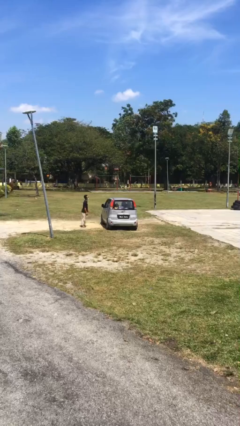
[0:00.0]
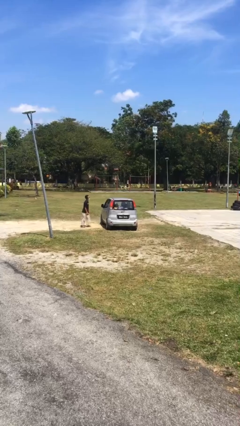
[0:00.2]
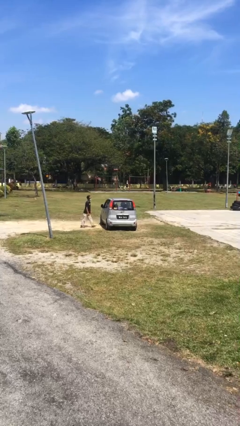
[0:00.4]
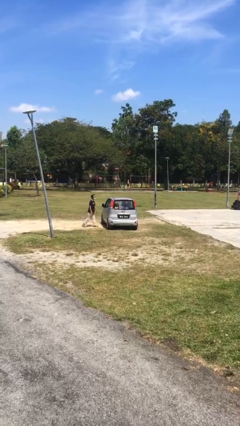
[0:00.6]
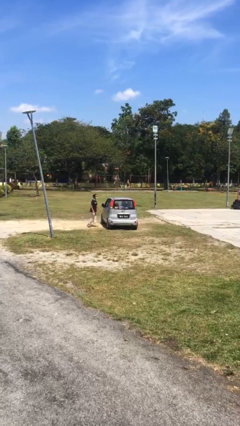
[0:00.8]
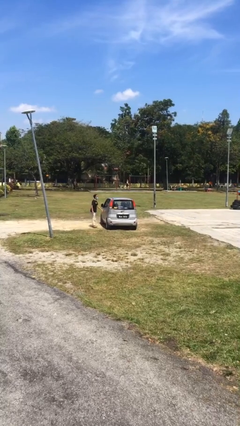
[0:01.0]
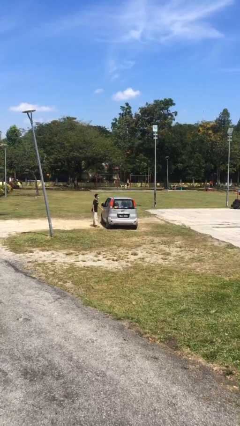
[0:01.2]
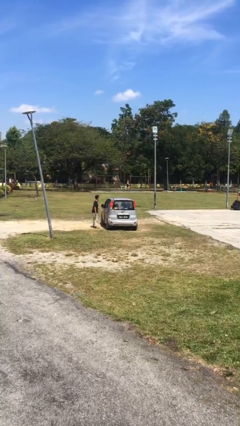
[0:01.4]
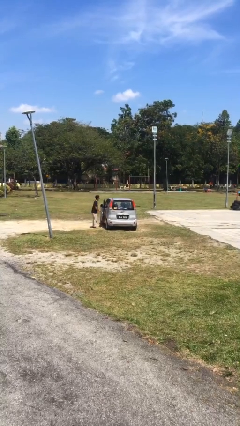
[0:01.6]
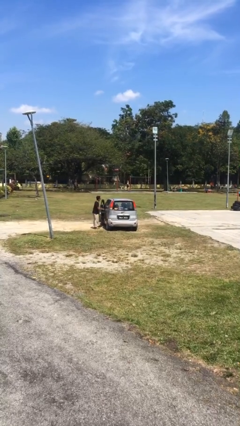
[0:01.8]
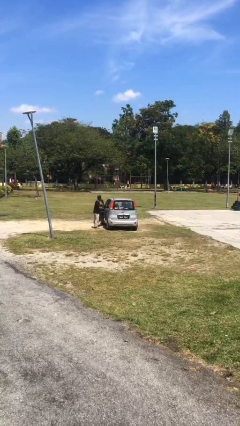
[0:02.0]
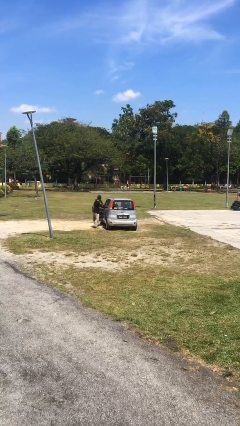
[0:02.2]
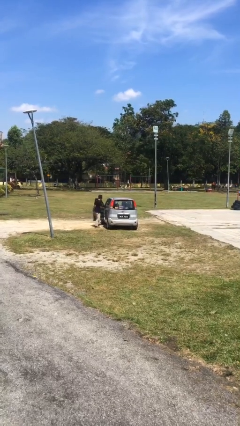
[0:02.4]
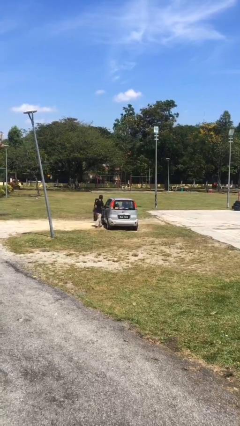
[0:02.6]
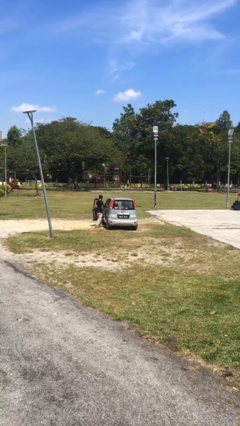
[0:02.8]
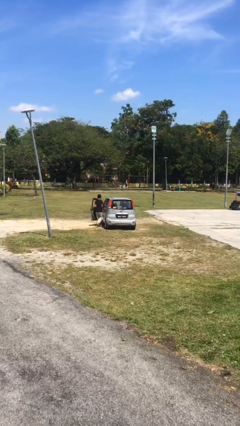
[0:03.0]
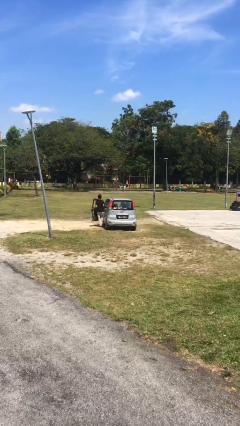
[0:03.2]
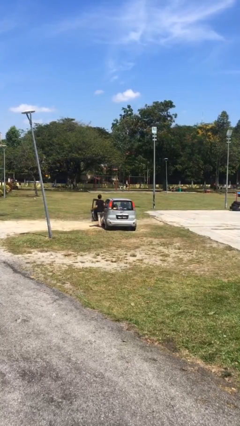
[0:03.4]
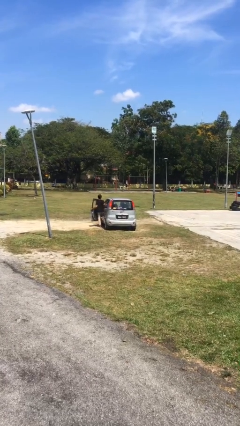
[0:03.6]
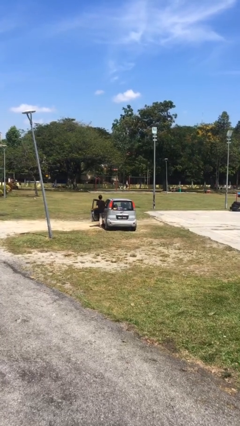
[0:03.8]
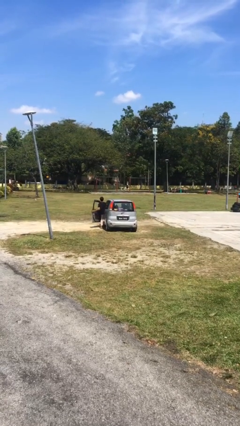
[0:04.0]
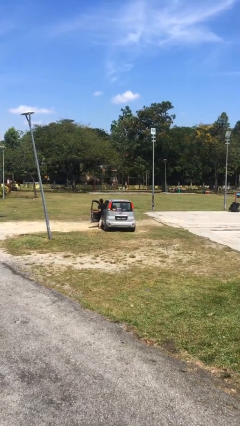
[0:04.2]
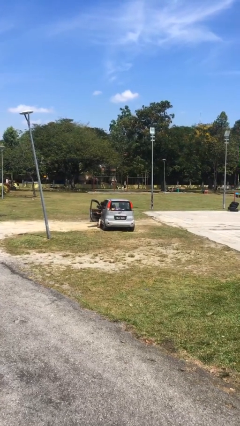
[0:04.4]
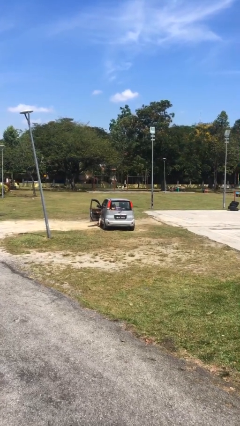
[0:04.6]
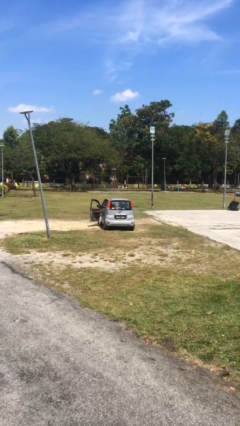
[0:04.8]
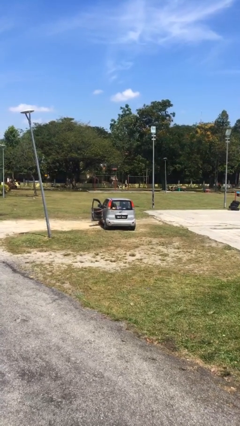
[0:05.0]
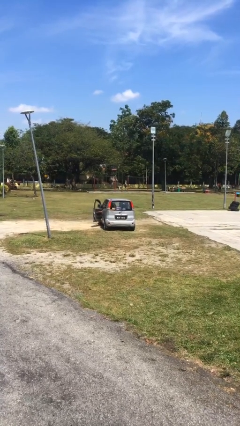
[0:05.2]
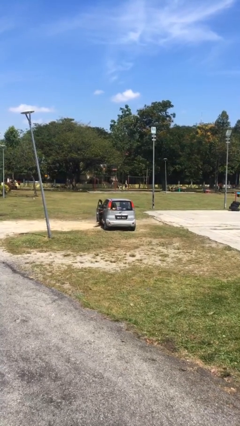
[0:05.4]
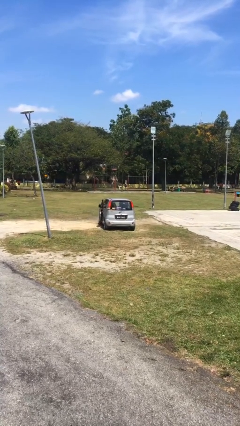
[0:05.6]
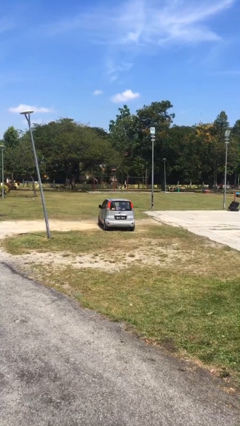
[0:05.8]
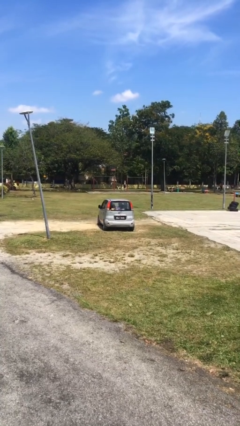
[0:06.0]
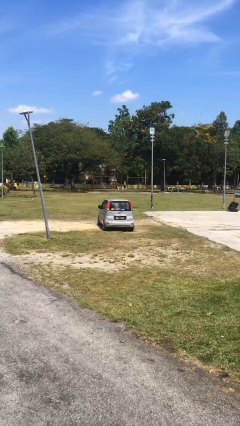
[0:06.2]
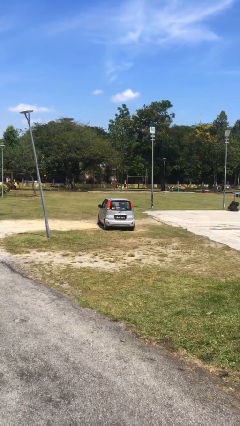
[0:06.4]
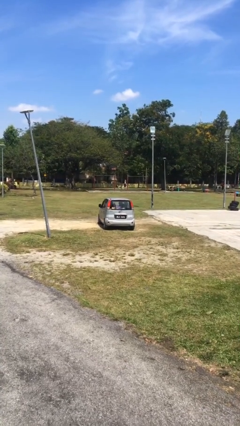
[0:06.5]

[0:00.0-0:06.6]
car picks up person

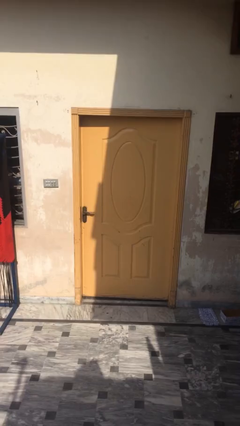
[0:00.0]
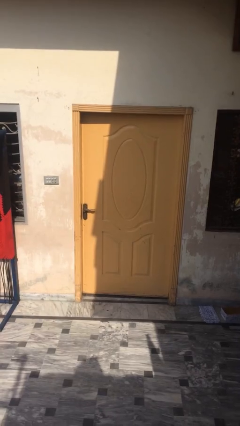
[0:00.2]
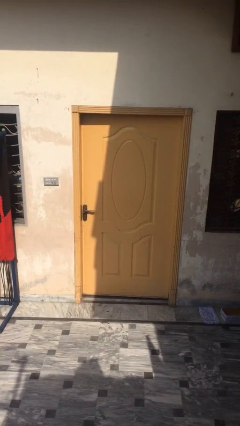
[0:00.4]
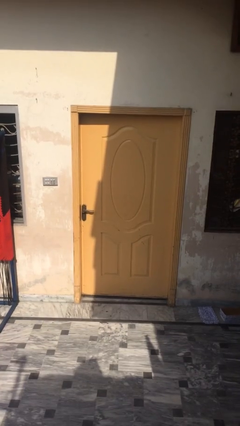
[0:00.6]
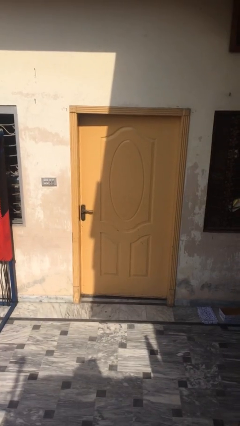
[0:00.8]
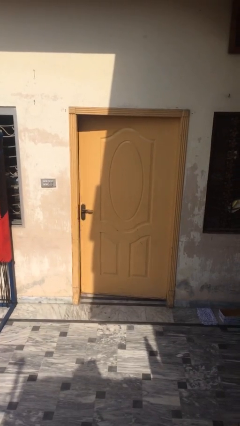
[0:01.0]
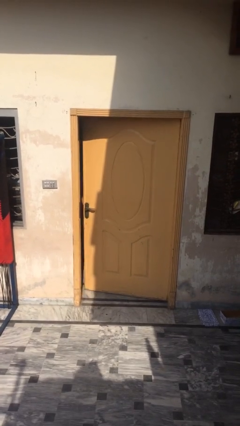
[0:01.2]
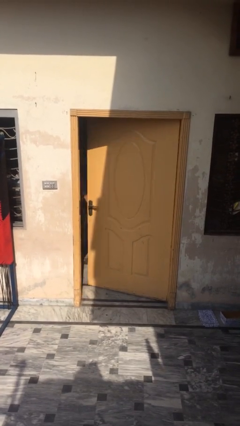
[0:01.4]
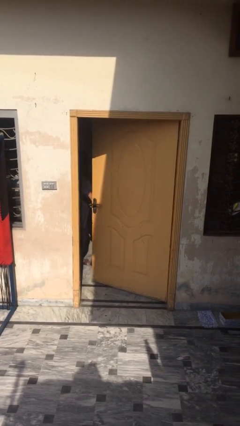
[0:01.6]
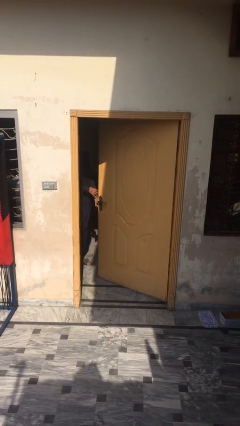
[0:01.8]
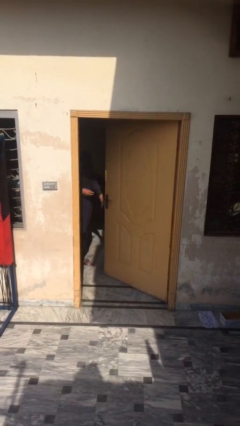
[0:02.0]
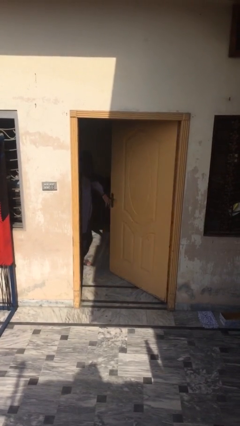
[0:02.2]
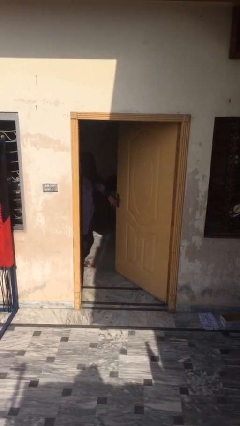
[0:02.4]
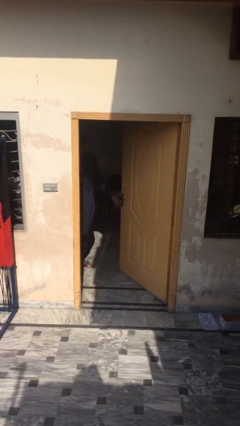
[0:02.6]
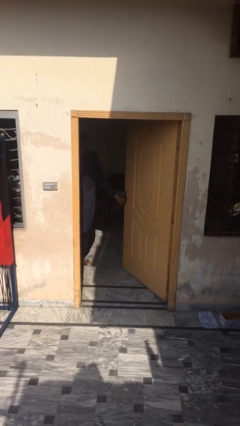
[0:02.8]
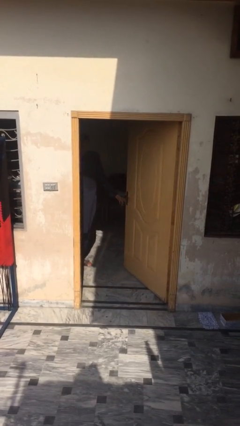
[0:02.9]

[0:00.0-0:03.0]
person opens facility door

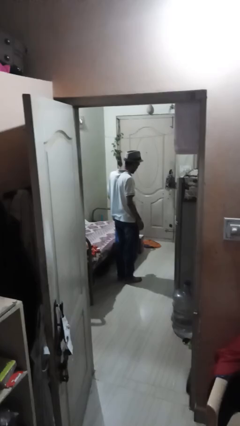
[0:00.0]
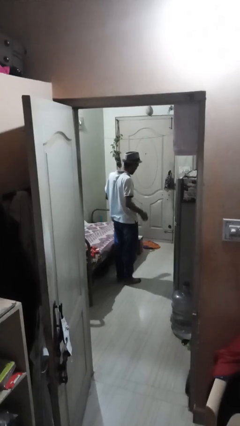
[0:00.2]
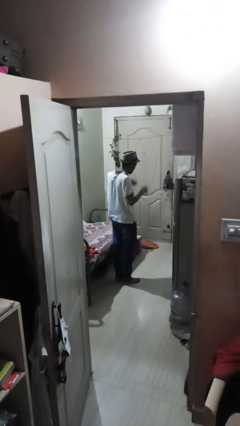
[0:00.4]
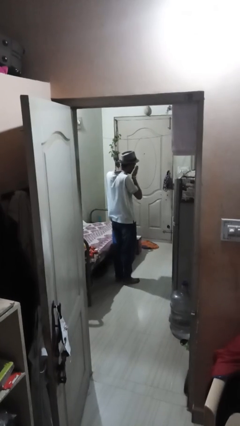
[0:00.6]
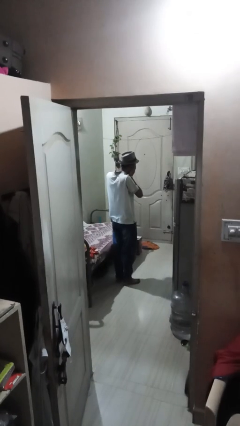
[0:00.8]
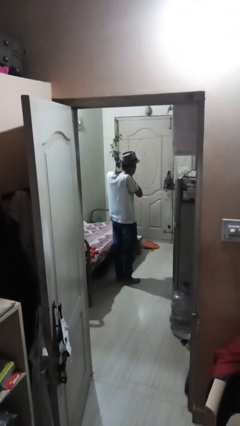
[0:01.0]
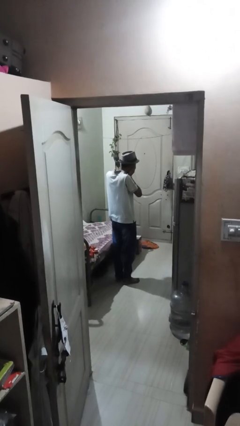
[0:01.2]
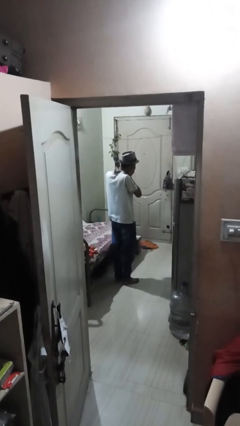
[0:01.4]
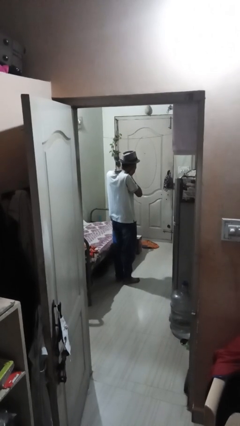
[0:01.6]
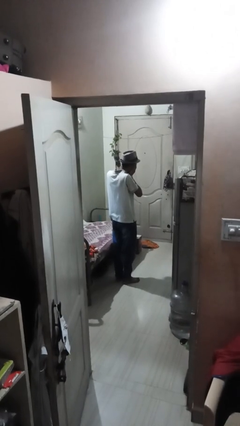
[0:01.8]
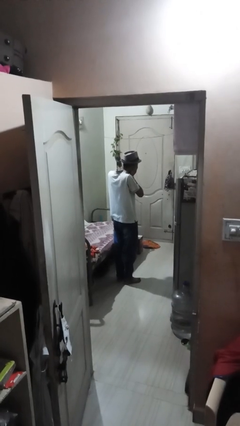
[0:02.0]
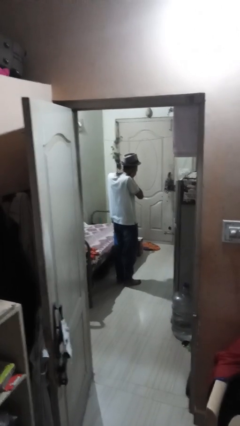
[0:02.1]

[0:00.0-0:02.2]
person covers face with hands

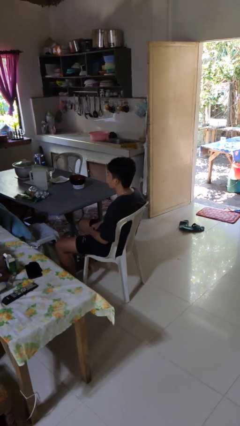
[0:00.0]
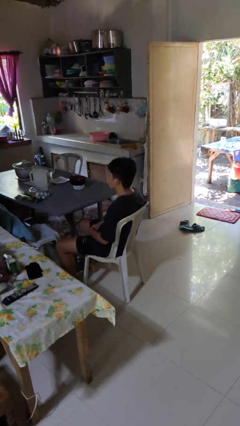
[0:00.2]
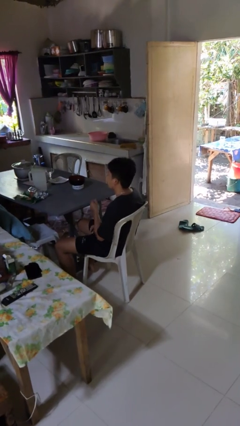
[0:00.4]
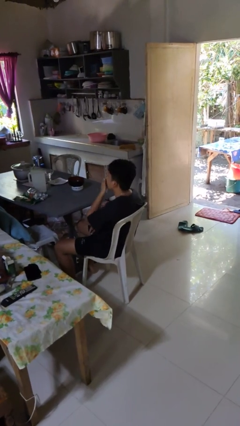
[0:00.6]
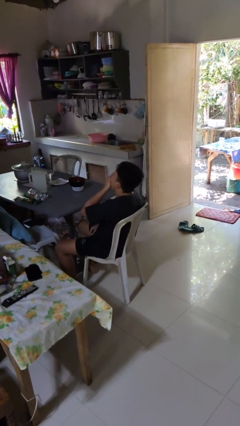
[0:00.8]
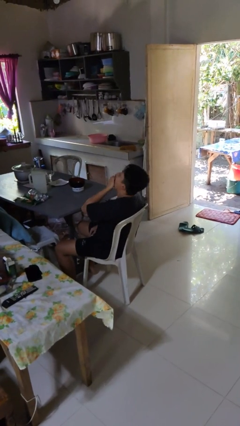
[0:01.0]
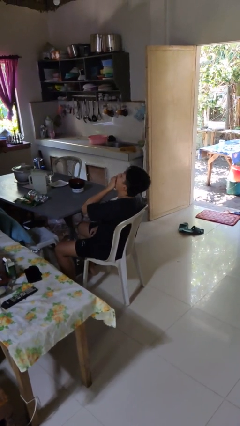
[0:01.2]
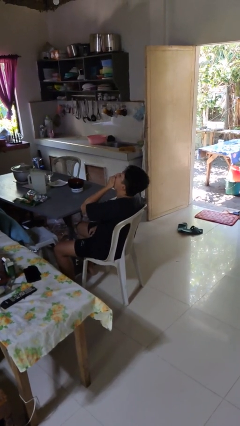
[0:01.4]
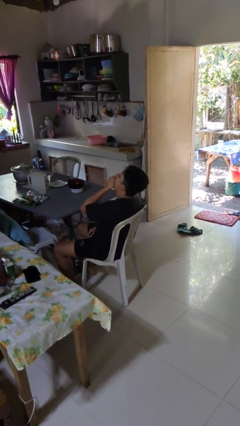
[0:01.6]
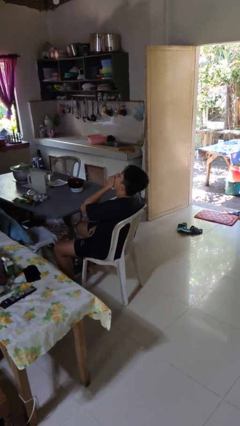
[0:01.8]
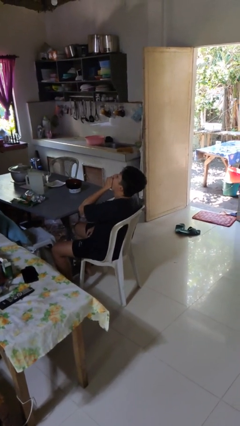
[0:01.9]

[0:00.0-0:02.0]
person yawns

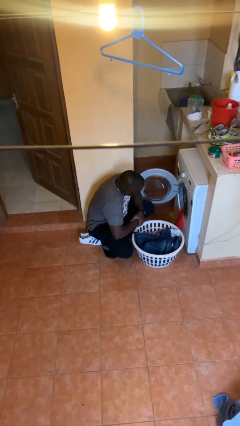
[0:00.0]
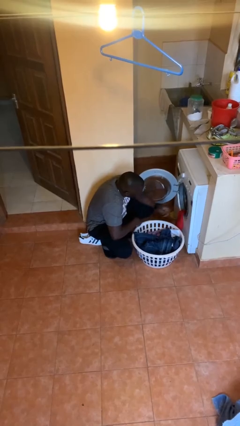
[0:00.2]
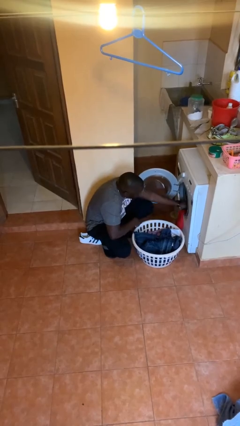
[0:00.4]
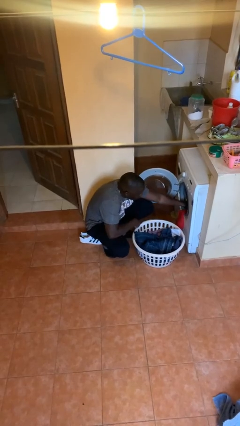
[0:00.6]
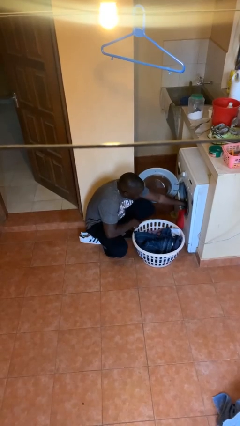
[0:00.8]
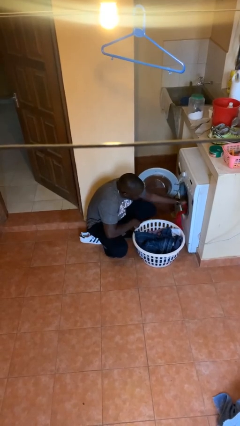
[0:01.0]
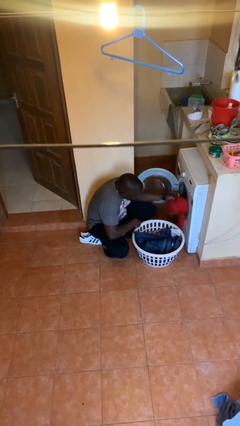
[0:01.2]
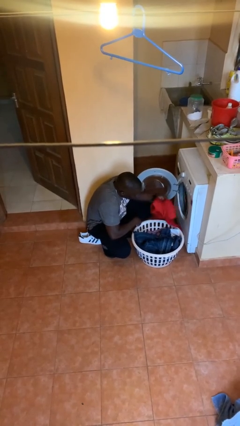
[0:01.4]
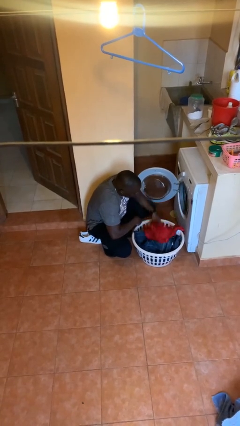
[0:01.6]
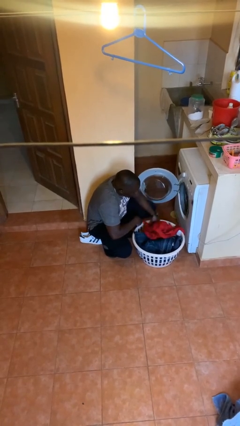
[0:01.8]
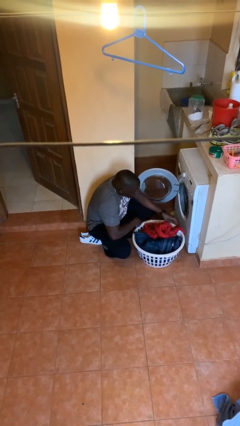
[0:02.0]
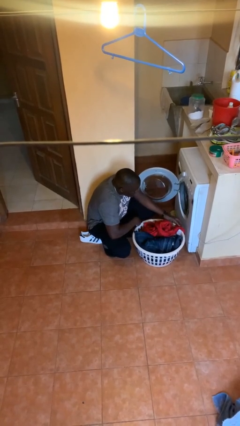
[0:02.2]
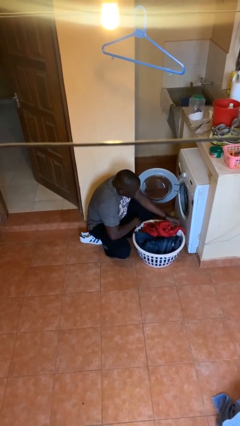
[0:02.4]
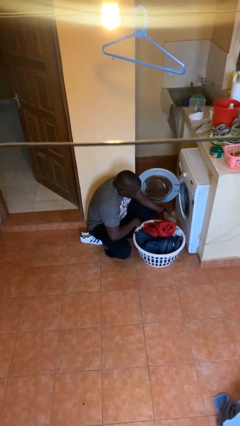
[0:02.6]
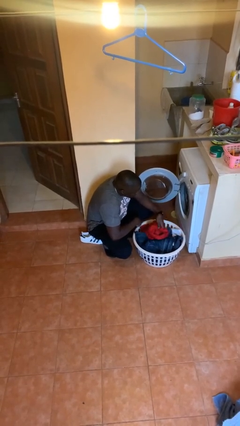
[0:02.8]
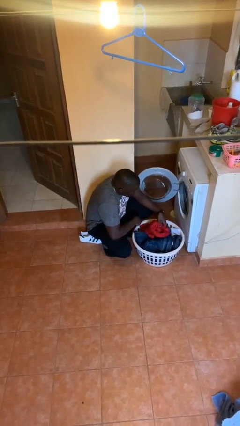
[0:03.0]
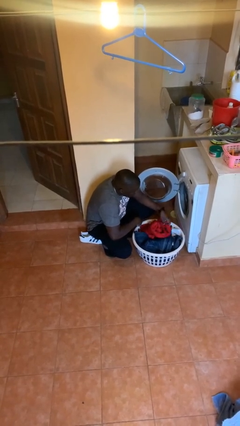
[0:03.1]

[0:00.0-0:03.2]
person unloads dryer

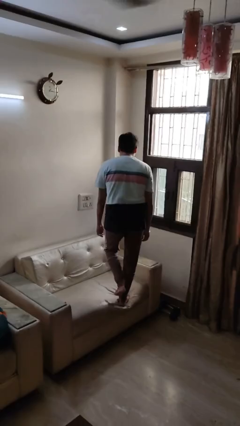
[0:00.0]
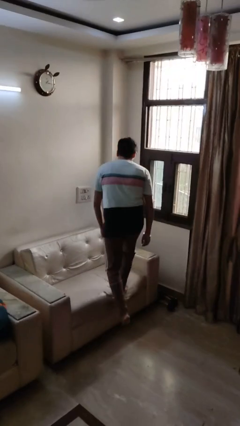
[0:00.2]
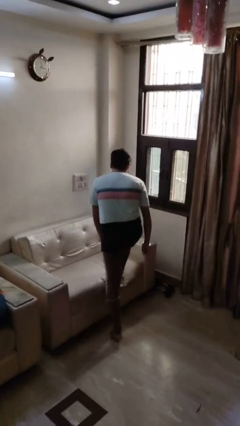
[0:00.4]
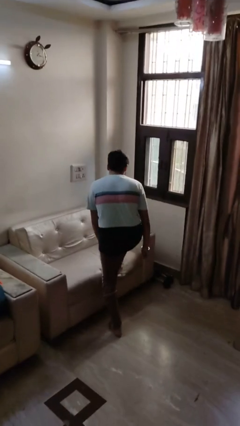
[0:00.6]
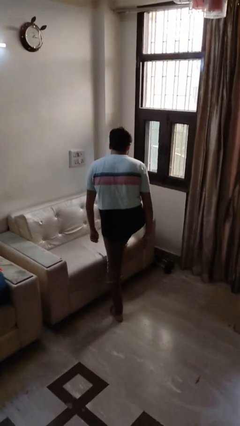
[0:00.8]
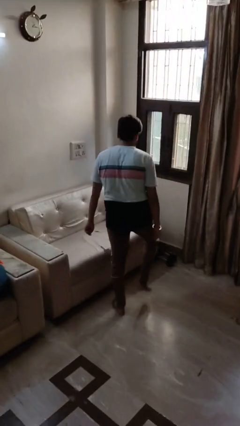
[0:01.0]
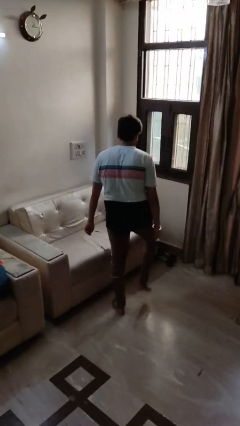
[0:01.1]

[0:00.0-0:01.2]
person climbs off couch
